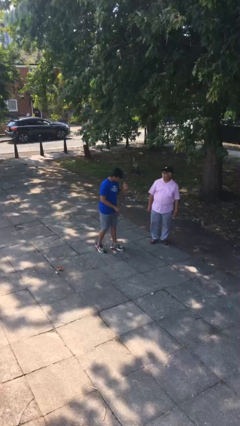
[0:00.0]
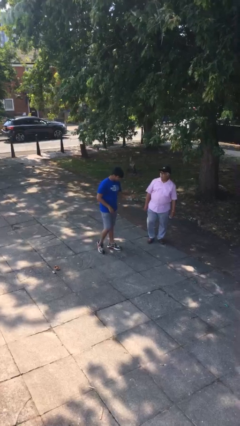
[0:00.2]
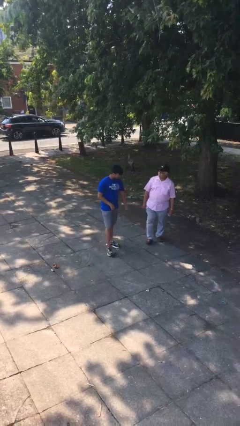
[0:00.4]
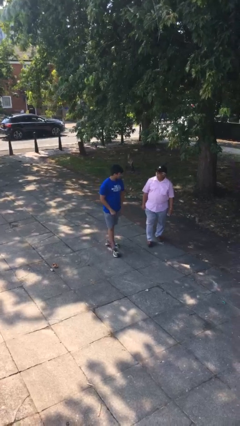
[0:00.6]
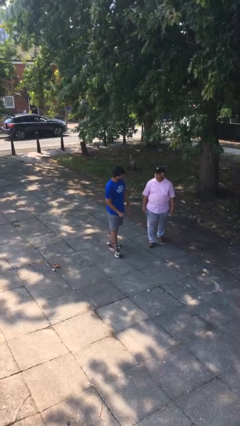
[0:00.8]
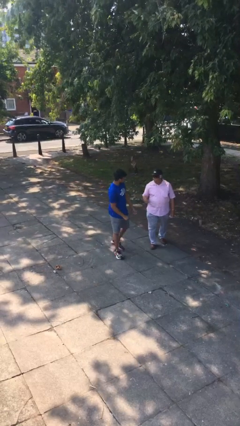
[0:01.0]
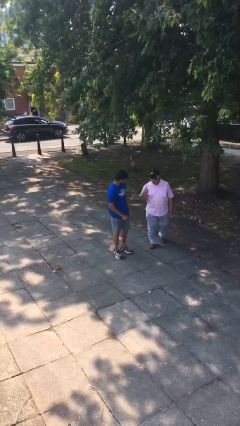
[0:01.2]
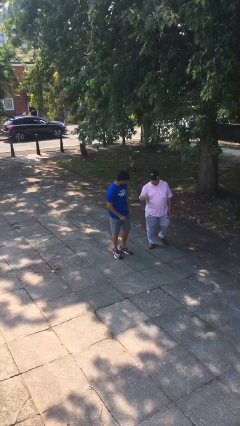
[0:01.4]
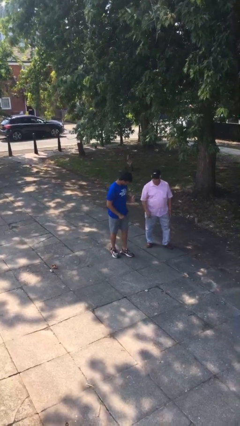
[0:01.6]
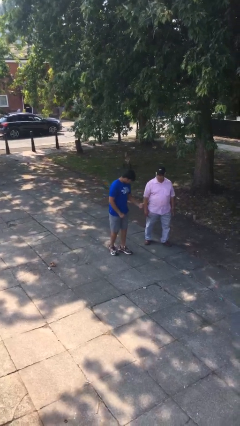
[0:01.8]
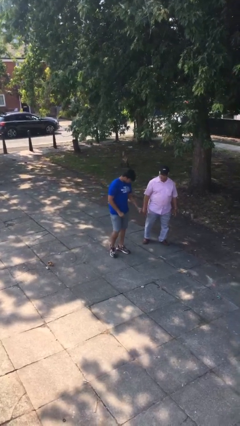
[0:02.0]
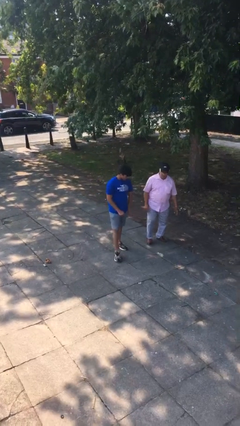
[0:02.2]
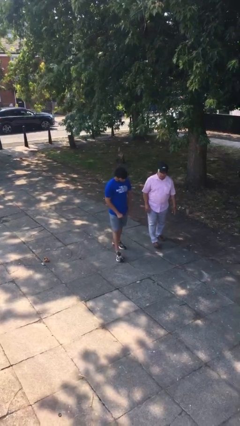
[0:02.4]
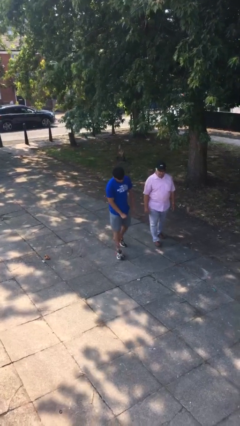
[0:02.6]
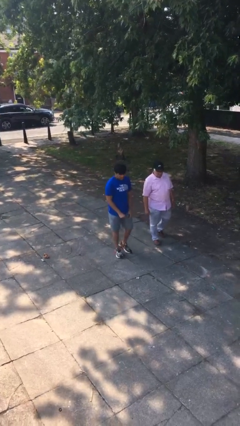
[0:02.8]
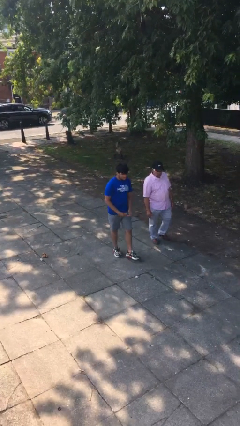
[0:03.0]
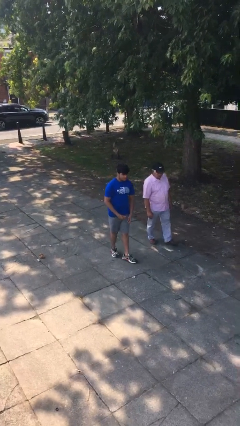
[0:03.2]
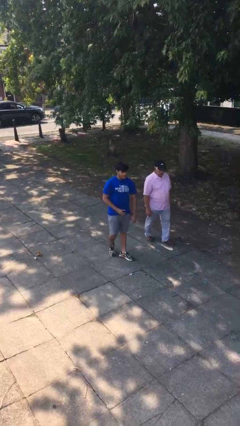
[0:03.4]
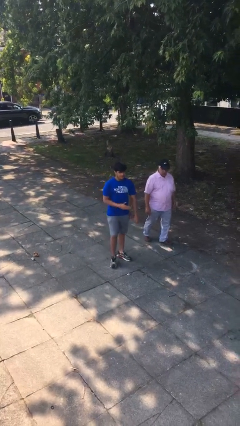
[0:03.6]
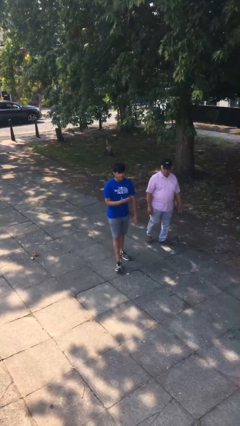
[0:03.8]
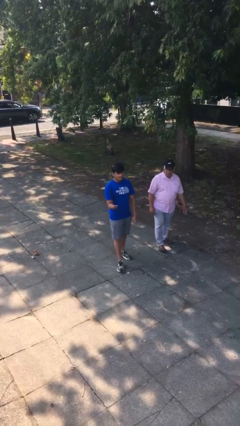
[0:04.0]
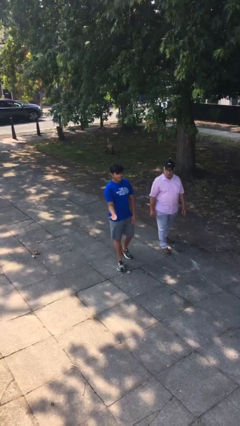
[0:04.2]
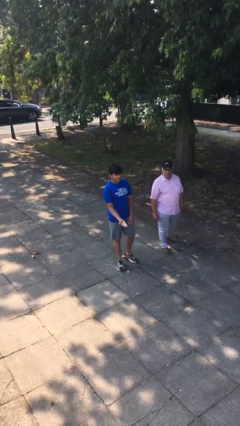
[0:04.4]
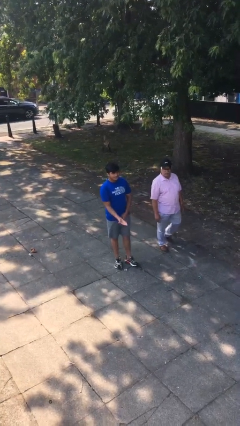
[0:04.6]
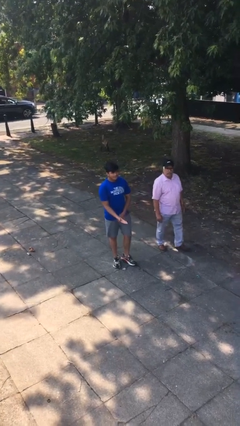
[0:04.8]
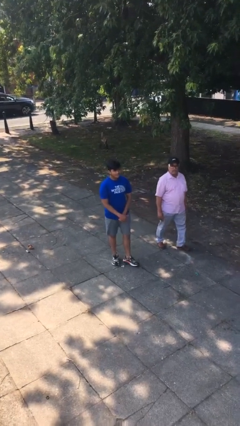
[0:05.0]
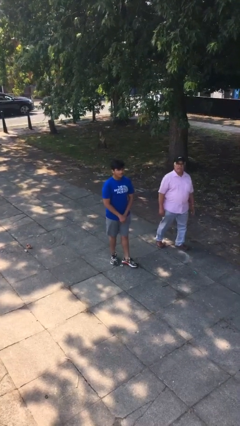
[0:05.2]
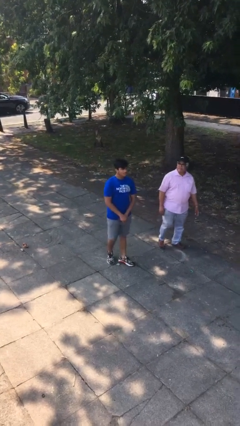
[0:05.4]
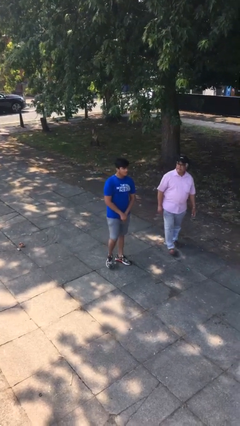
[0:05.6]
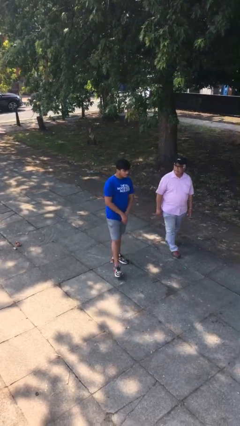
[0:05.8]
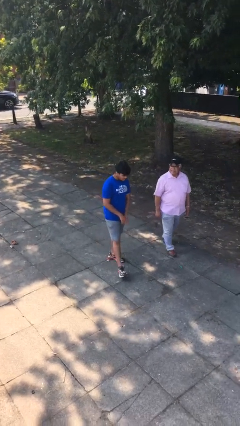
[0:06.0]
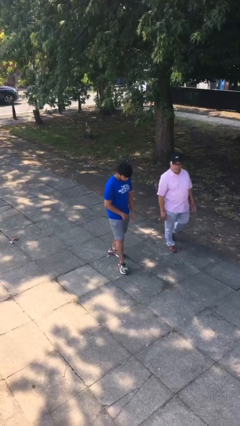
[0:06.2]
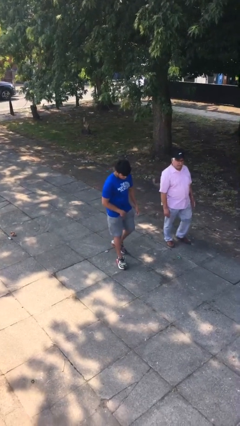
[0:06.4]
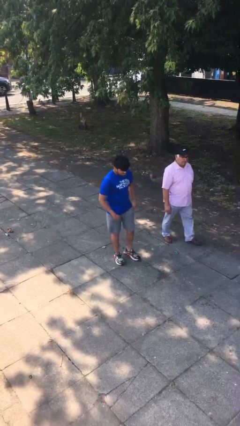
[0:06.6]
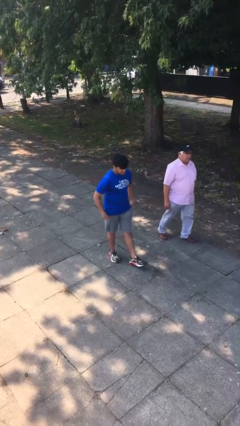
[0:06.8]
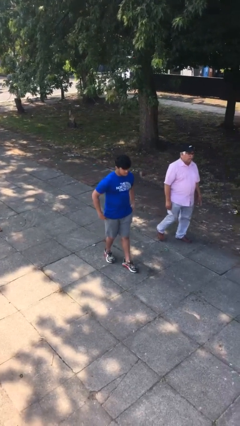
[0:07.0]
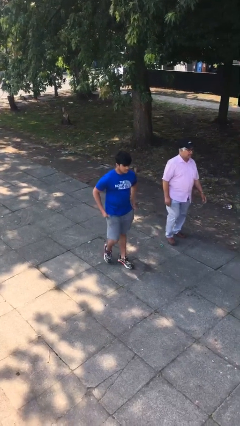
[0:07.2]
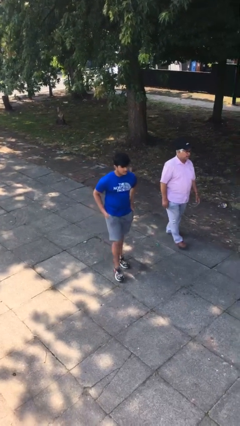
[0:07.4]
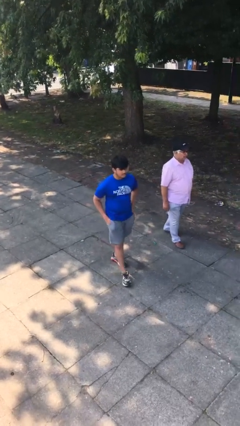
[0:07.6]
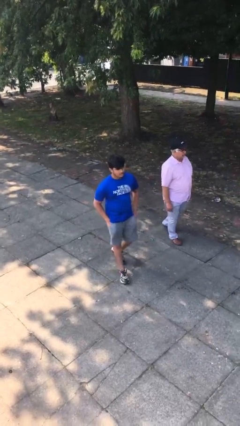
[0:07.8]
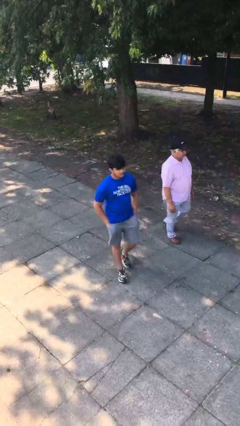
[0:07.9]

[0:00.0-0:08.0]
person talks to person

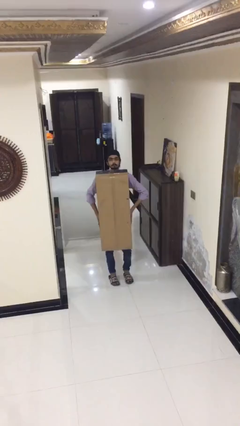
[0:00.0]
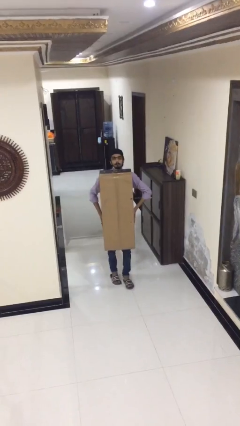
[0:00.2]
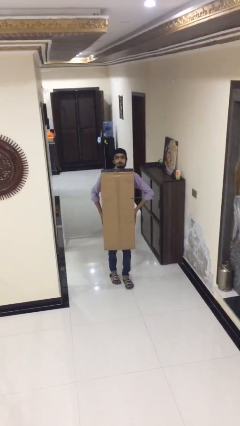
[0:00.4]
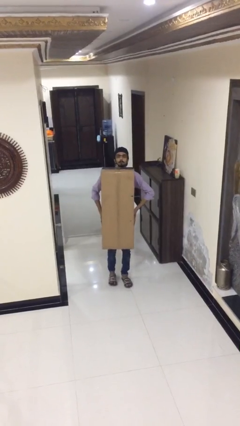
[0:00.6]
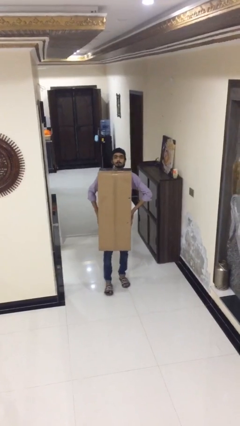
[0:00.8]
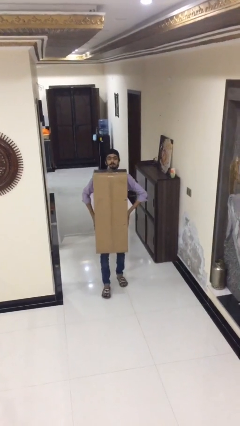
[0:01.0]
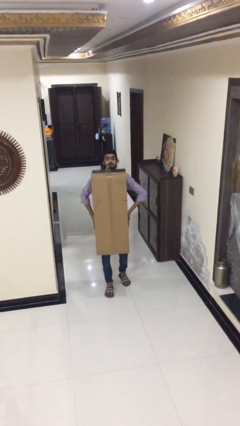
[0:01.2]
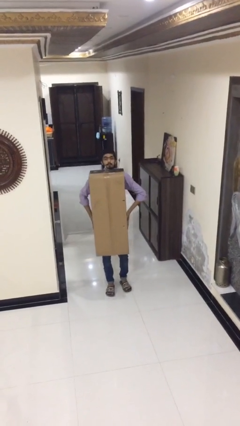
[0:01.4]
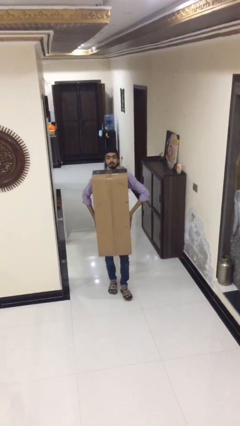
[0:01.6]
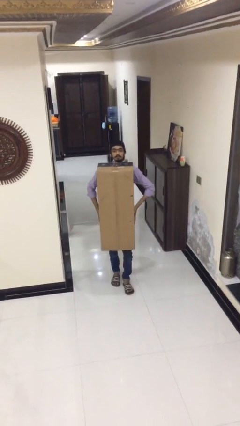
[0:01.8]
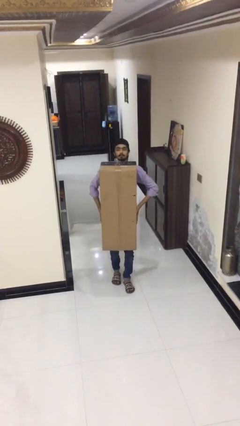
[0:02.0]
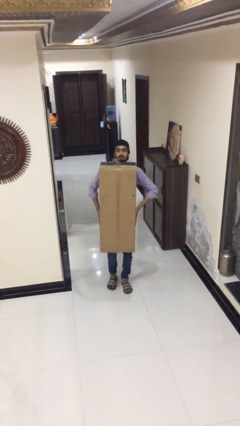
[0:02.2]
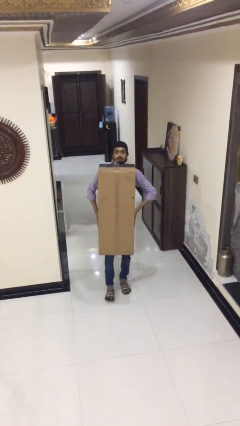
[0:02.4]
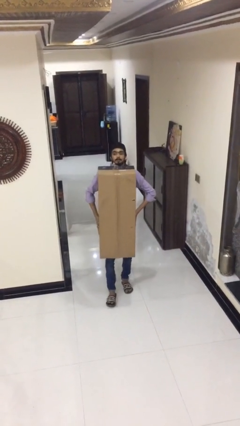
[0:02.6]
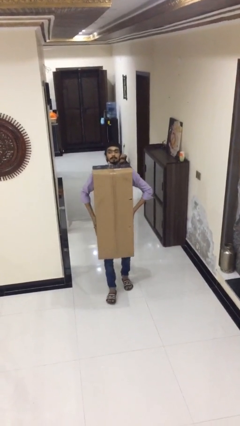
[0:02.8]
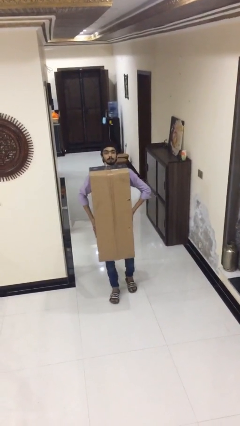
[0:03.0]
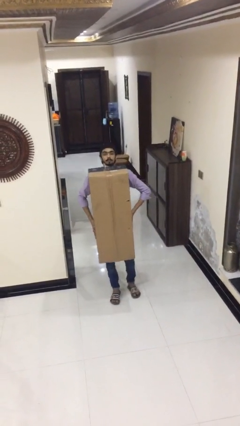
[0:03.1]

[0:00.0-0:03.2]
person carries heavy object

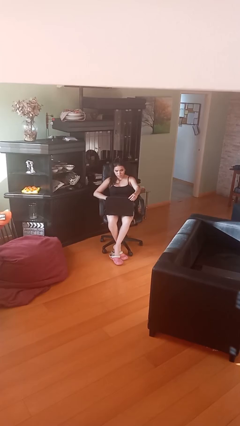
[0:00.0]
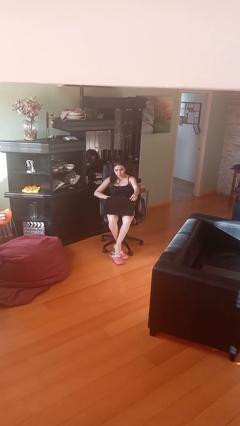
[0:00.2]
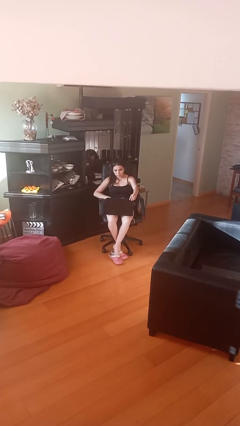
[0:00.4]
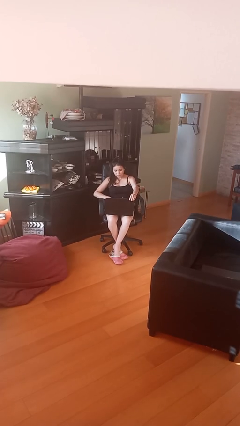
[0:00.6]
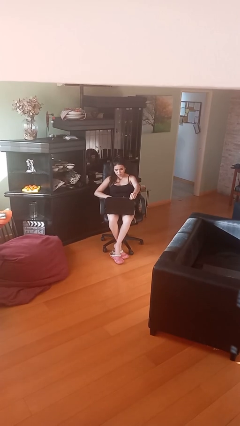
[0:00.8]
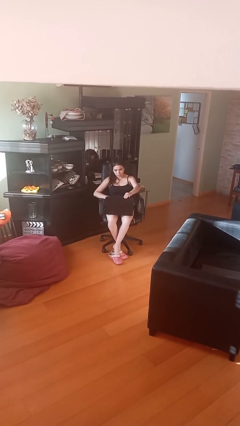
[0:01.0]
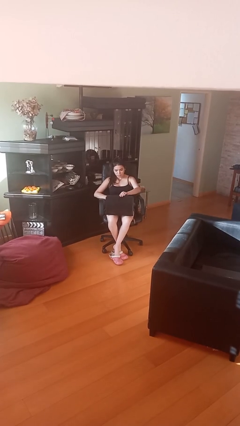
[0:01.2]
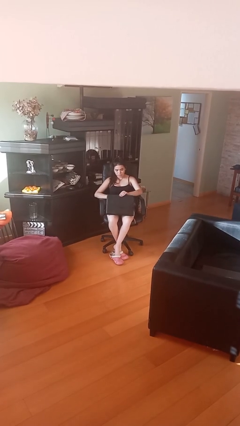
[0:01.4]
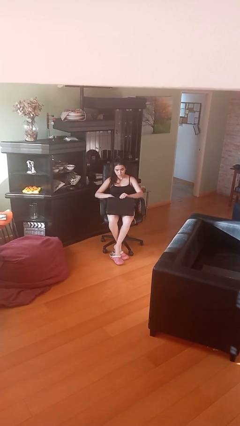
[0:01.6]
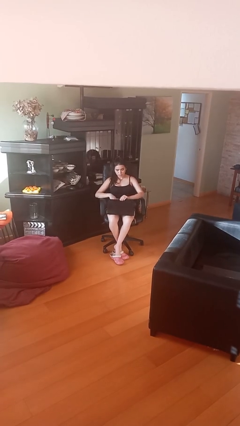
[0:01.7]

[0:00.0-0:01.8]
person interacts with laptop

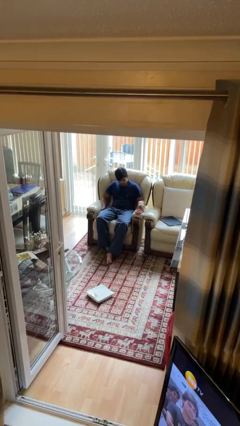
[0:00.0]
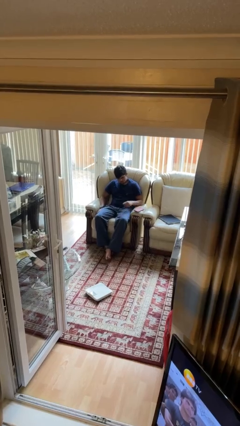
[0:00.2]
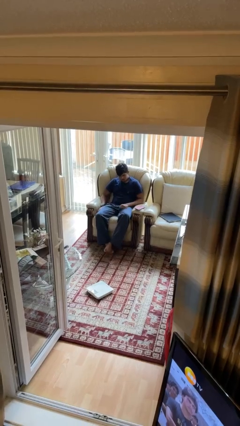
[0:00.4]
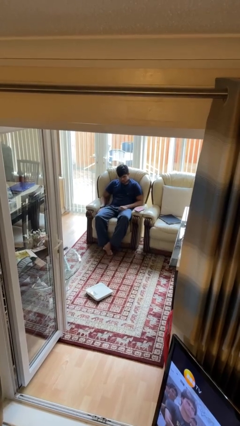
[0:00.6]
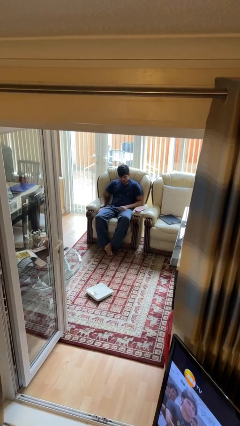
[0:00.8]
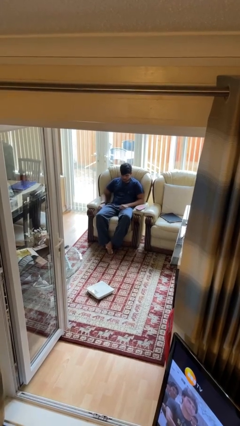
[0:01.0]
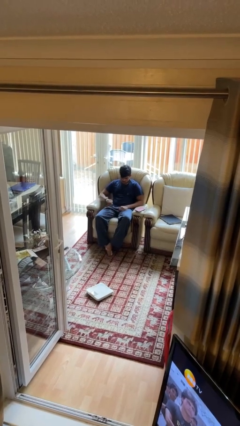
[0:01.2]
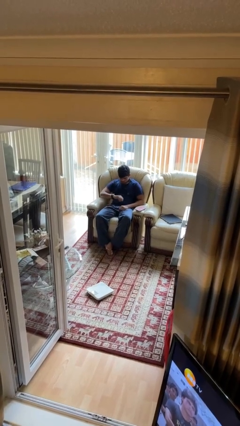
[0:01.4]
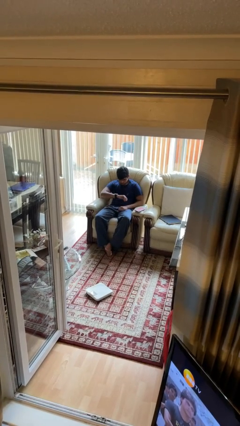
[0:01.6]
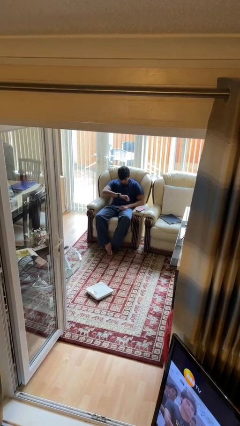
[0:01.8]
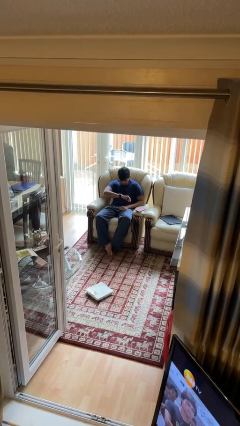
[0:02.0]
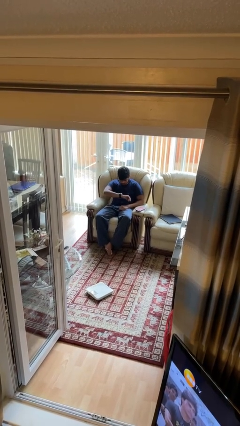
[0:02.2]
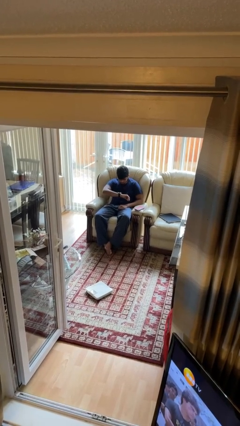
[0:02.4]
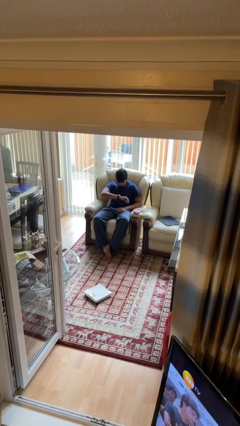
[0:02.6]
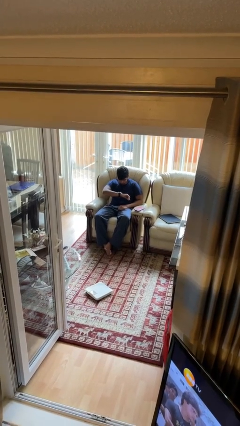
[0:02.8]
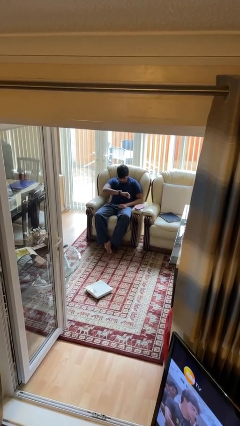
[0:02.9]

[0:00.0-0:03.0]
person looks at wristwatch

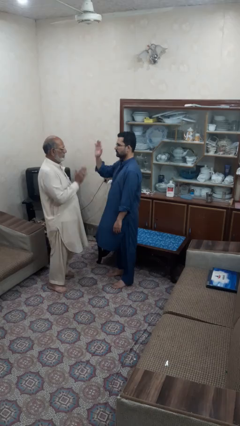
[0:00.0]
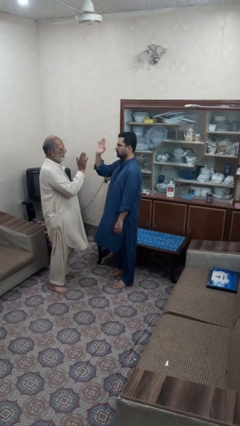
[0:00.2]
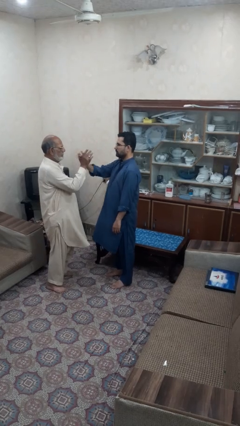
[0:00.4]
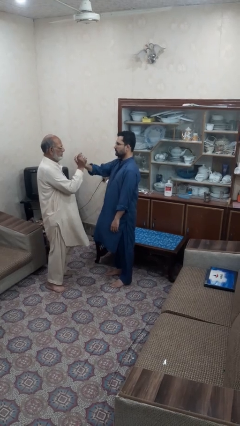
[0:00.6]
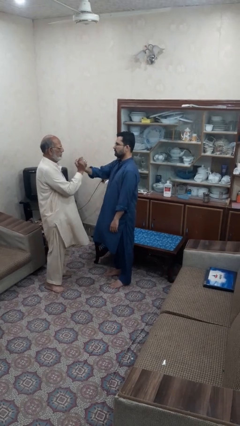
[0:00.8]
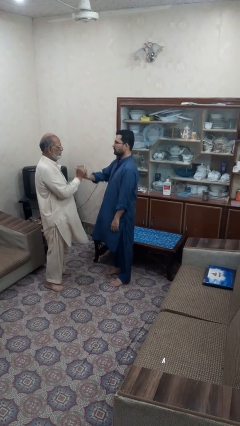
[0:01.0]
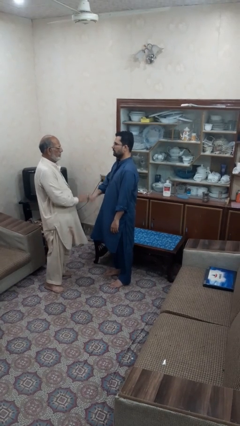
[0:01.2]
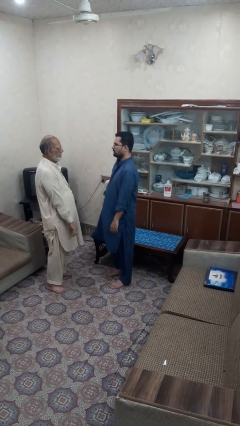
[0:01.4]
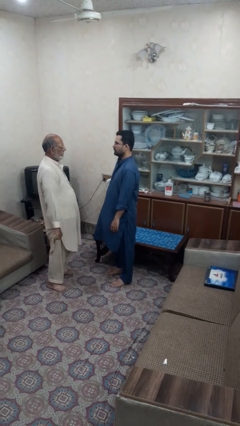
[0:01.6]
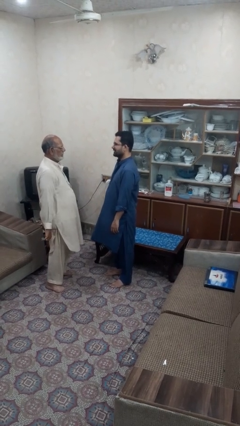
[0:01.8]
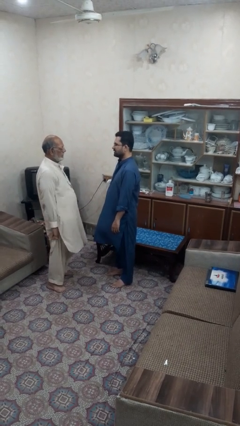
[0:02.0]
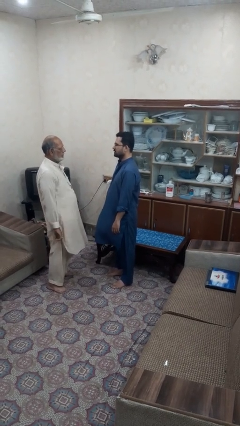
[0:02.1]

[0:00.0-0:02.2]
person highfives hand
